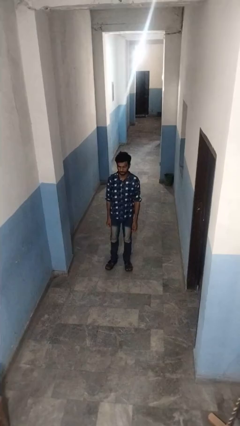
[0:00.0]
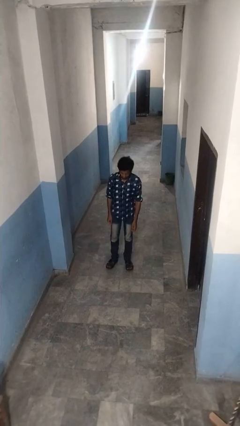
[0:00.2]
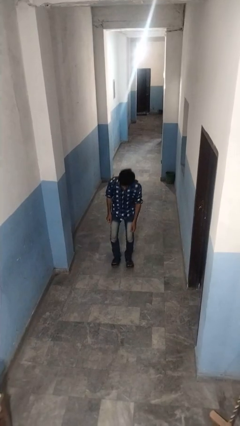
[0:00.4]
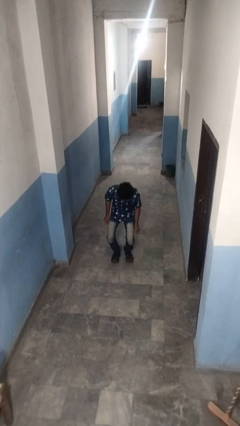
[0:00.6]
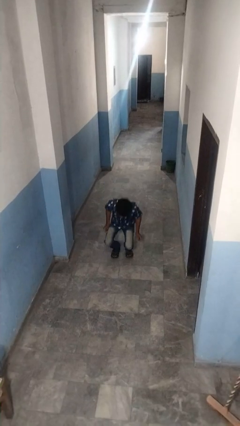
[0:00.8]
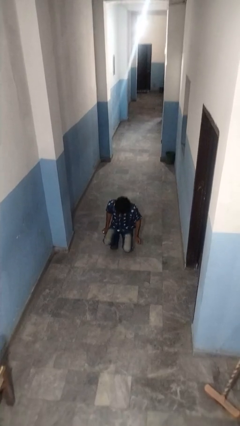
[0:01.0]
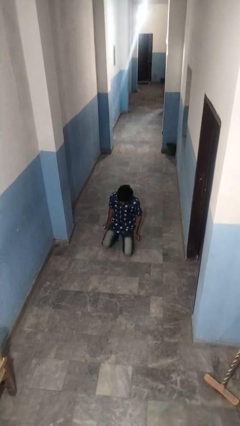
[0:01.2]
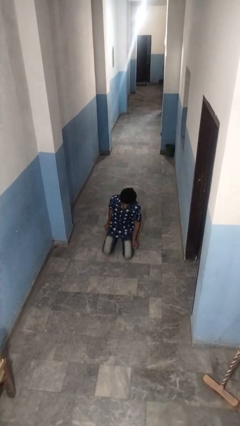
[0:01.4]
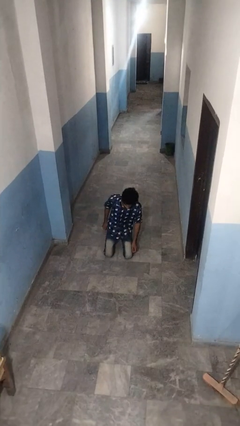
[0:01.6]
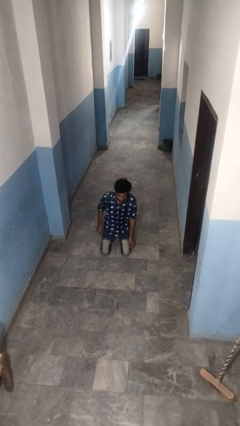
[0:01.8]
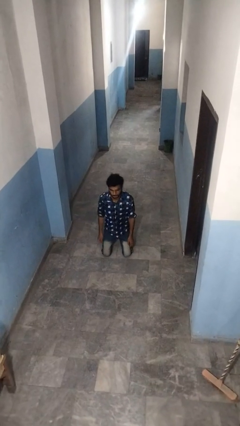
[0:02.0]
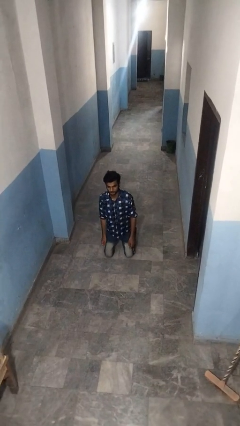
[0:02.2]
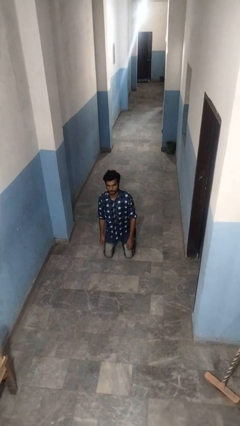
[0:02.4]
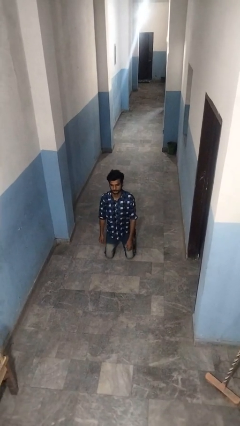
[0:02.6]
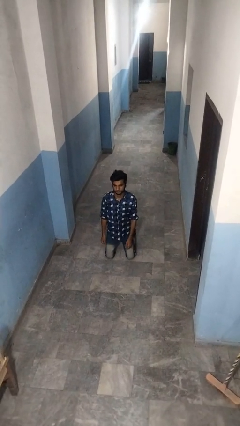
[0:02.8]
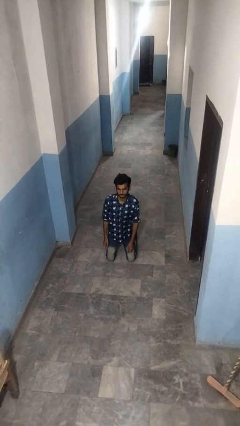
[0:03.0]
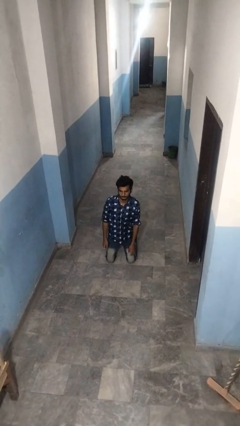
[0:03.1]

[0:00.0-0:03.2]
person kneels

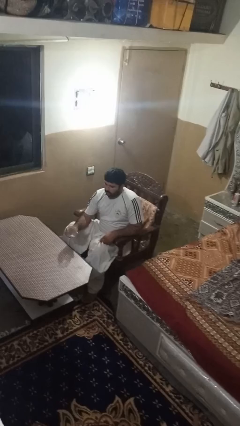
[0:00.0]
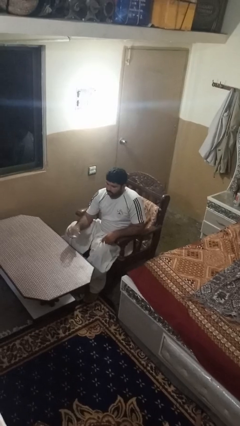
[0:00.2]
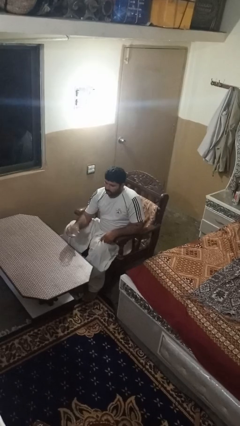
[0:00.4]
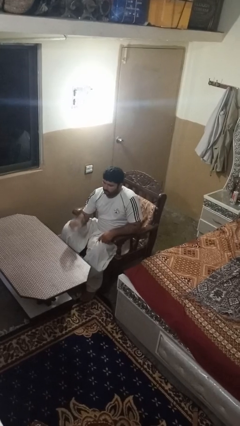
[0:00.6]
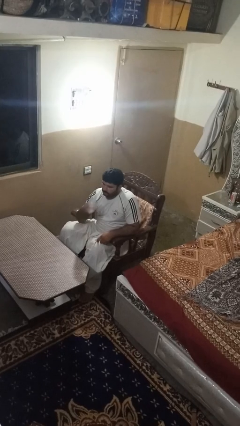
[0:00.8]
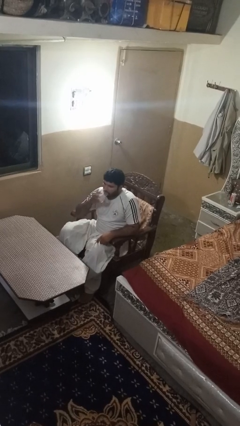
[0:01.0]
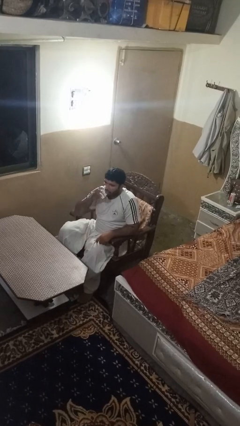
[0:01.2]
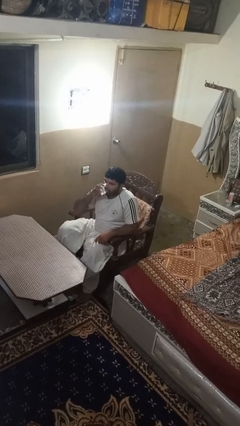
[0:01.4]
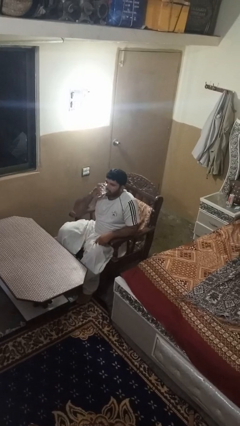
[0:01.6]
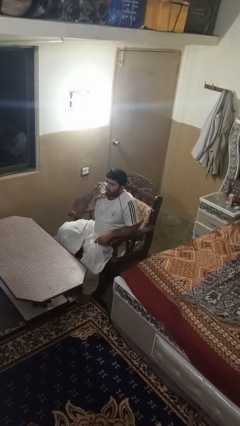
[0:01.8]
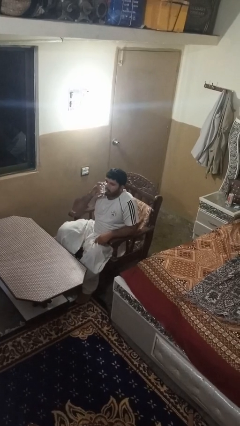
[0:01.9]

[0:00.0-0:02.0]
person drinks from shotglass

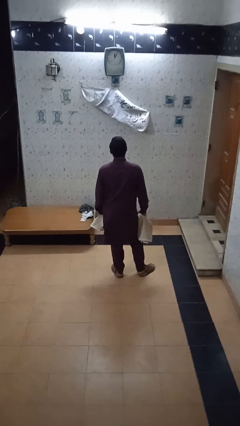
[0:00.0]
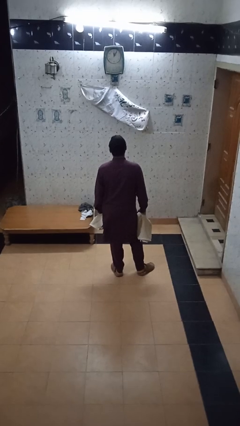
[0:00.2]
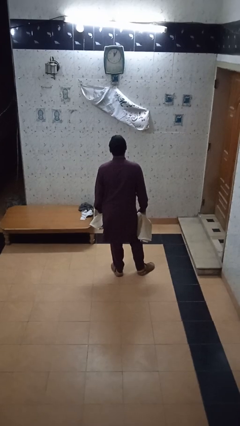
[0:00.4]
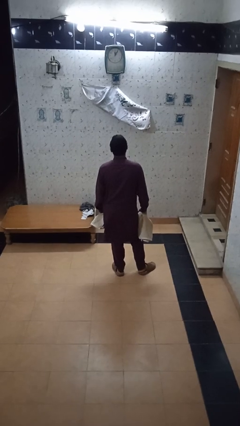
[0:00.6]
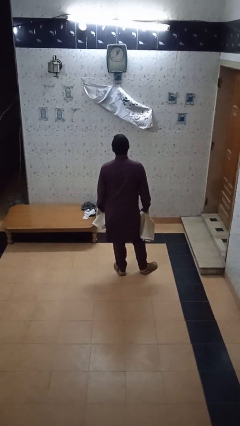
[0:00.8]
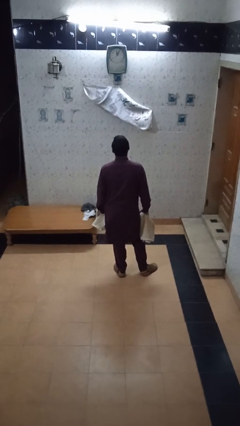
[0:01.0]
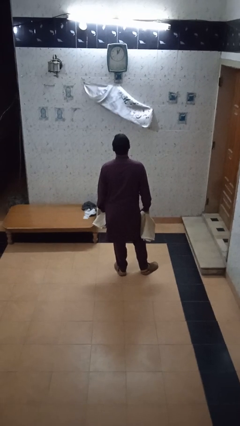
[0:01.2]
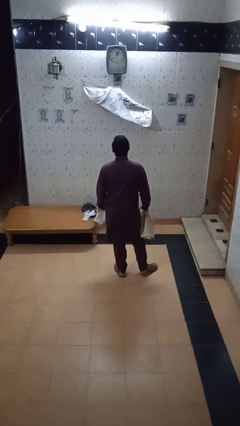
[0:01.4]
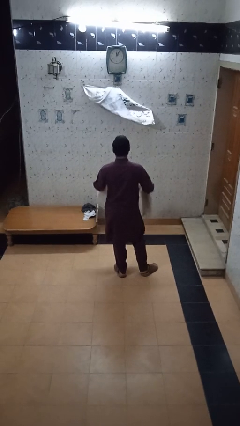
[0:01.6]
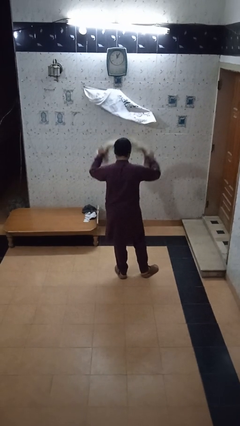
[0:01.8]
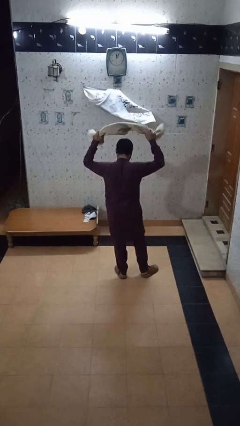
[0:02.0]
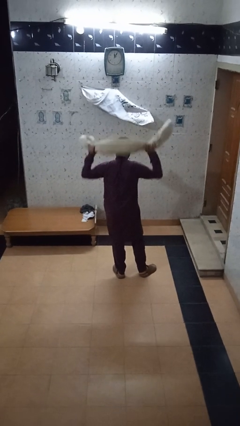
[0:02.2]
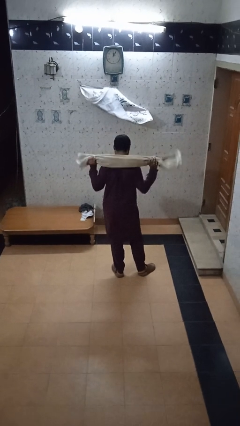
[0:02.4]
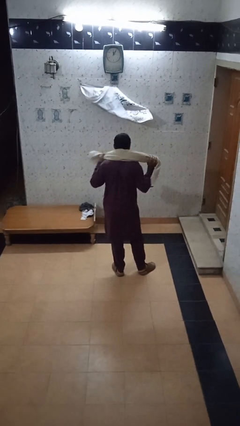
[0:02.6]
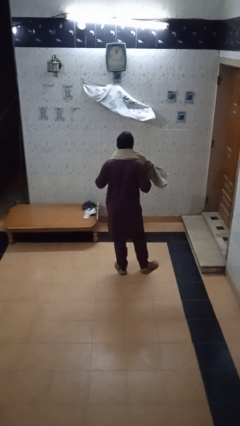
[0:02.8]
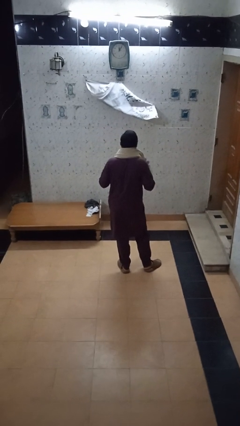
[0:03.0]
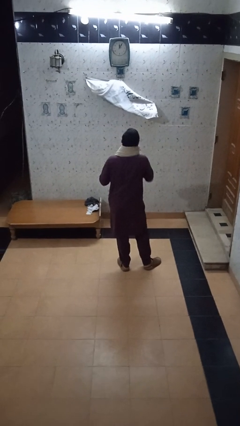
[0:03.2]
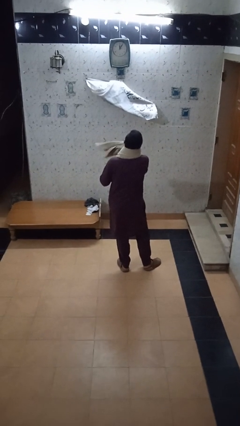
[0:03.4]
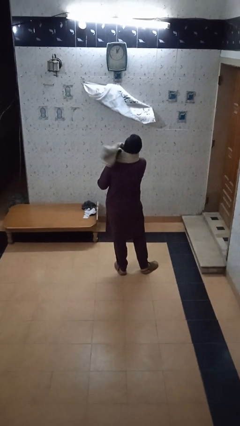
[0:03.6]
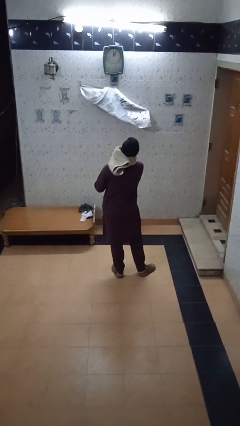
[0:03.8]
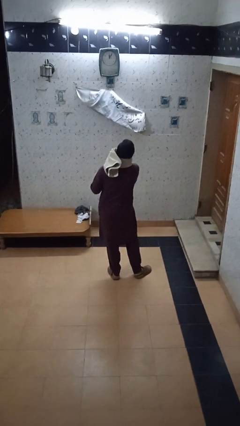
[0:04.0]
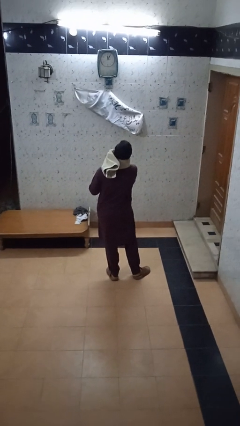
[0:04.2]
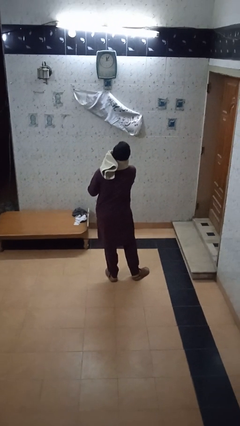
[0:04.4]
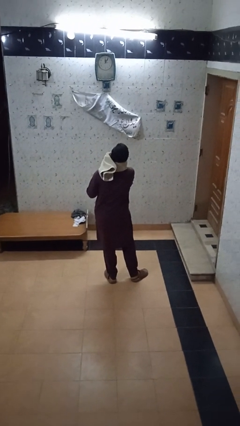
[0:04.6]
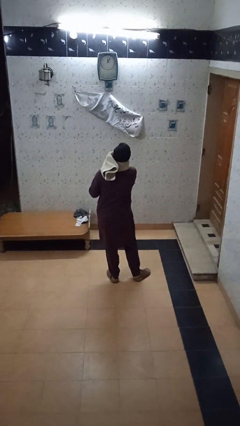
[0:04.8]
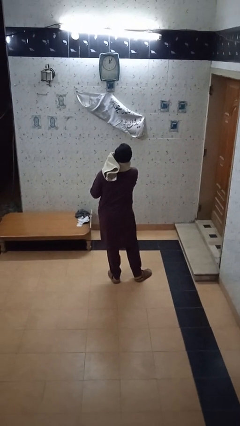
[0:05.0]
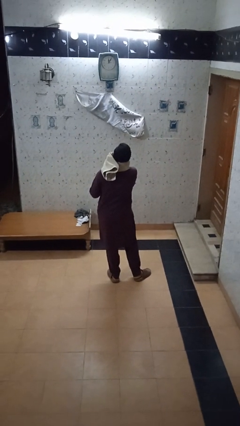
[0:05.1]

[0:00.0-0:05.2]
person puts on scarf

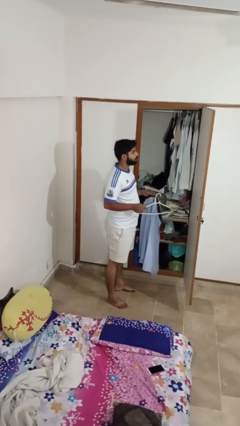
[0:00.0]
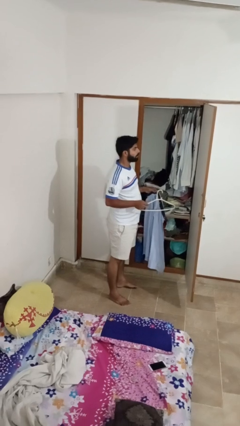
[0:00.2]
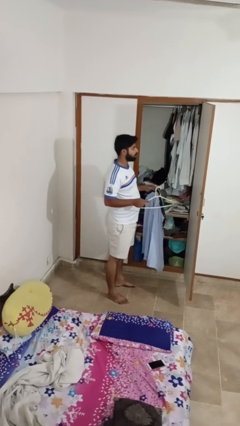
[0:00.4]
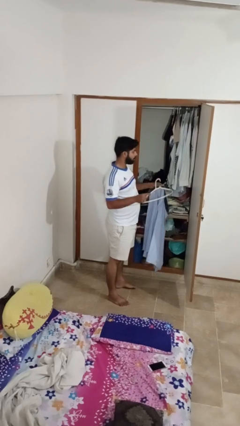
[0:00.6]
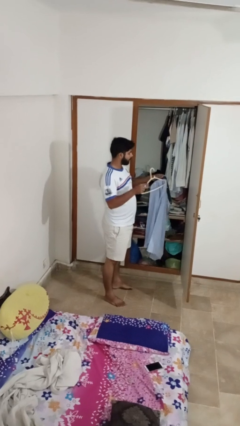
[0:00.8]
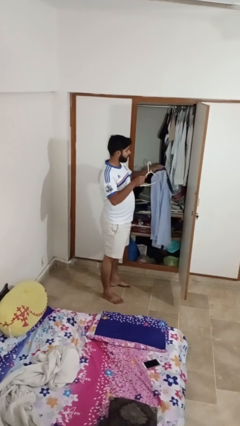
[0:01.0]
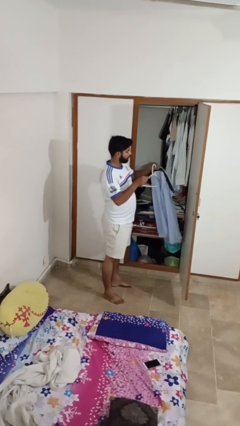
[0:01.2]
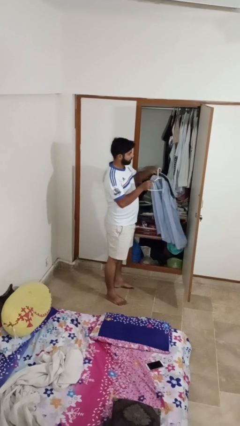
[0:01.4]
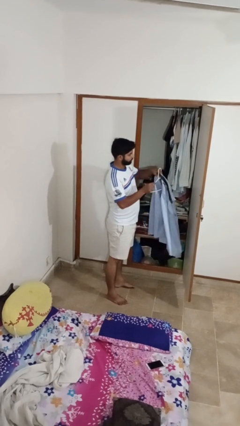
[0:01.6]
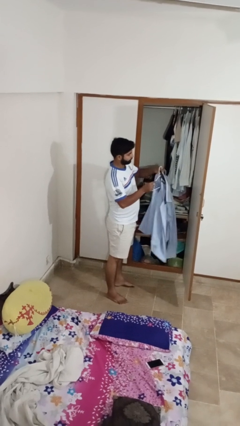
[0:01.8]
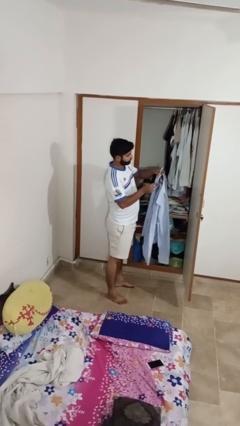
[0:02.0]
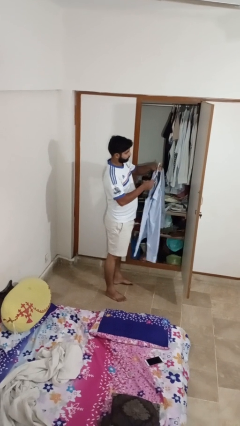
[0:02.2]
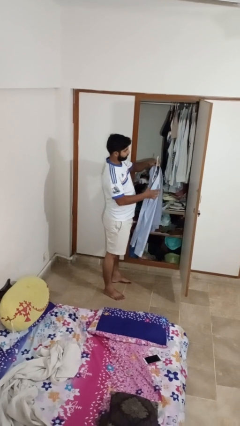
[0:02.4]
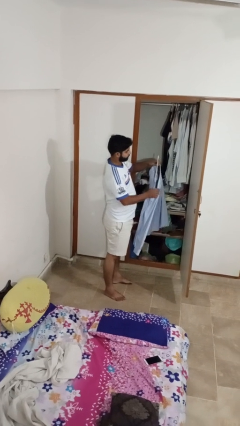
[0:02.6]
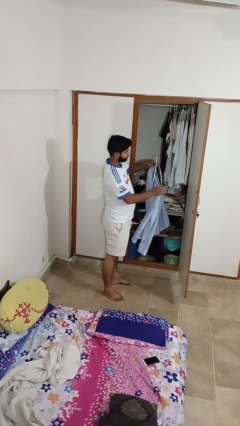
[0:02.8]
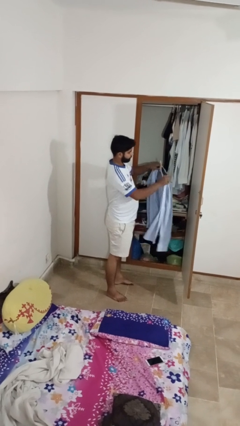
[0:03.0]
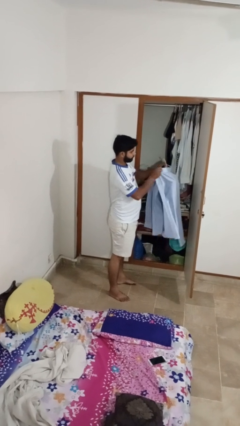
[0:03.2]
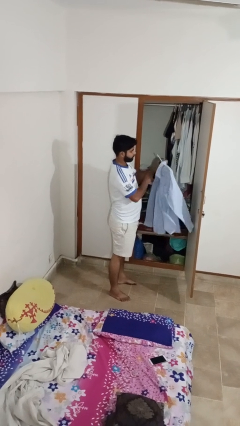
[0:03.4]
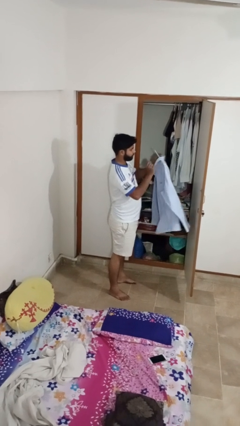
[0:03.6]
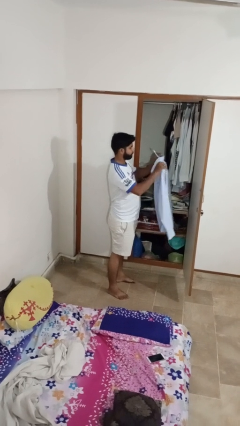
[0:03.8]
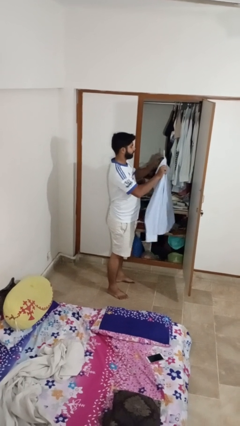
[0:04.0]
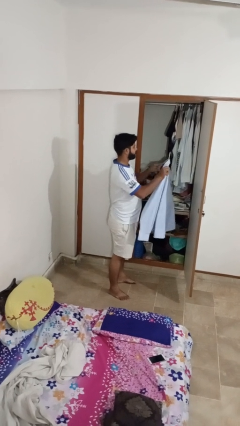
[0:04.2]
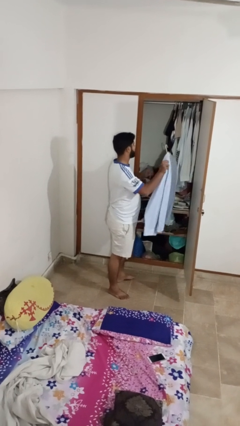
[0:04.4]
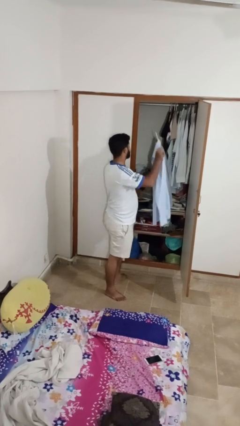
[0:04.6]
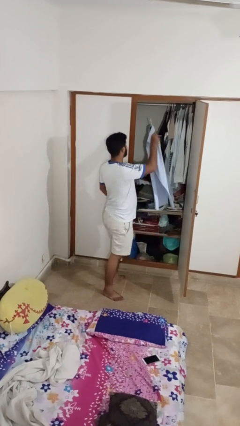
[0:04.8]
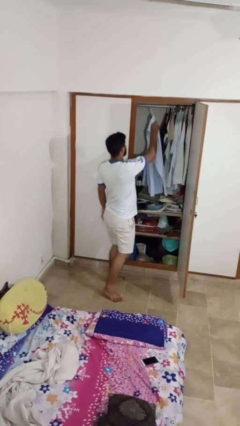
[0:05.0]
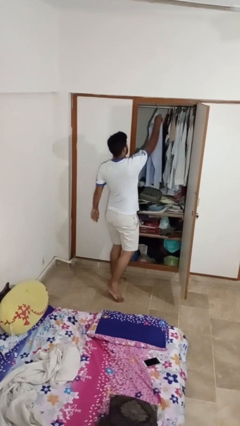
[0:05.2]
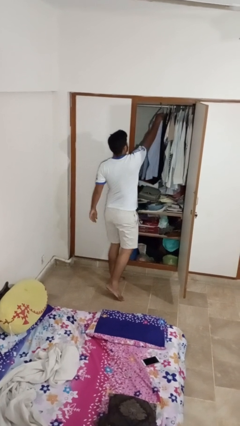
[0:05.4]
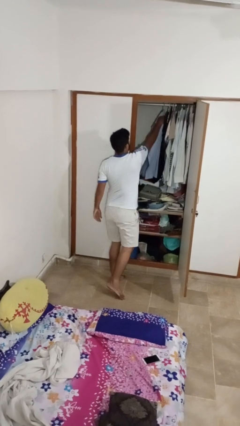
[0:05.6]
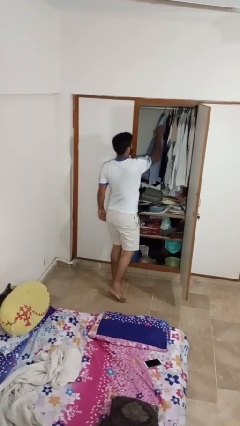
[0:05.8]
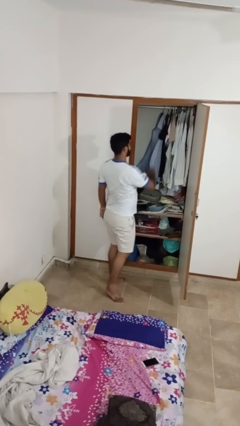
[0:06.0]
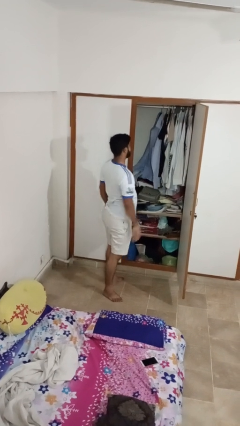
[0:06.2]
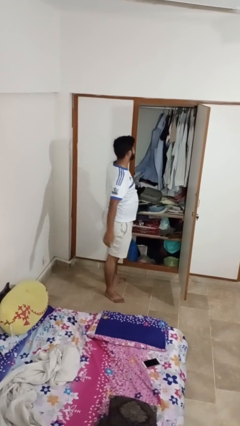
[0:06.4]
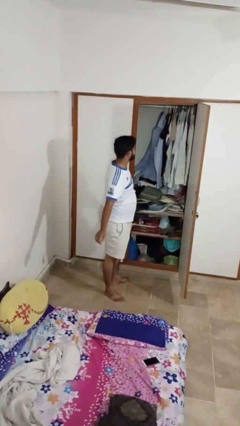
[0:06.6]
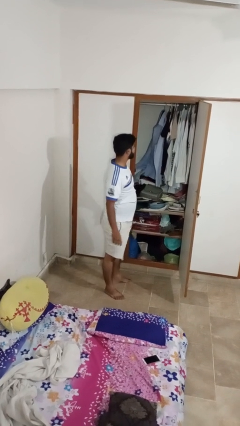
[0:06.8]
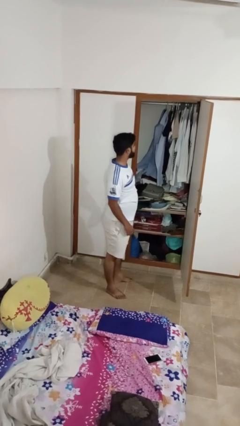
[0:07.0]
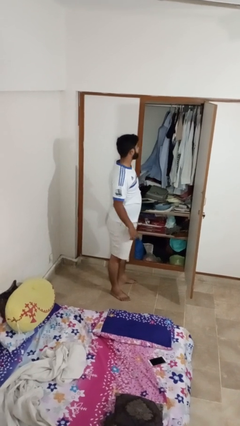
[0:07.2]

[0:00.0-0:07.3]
person puts clothes into closet

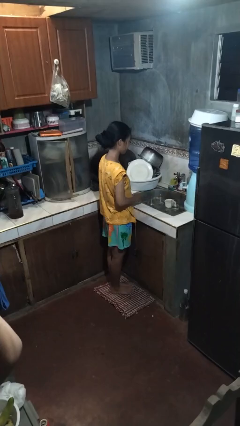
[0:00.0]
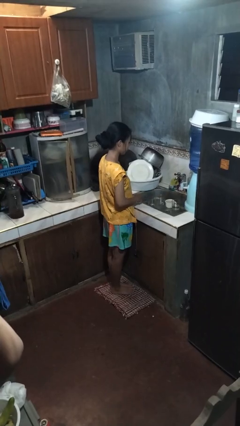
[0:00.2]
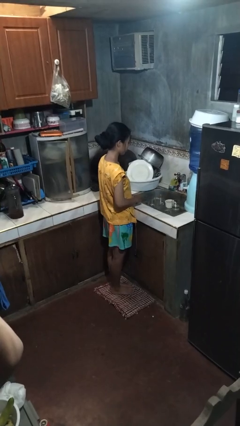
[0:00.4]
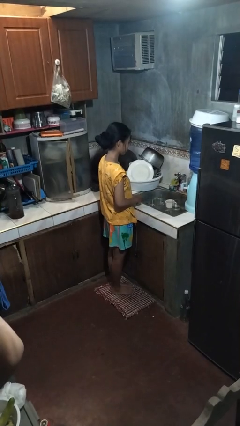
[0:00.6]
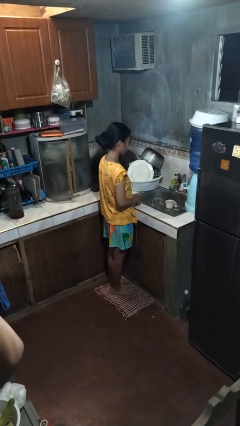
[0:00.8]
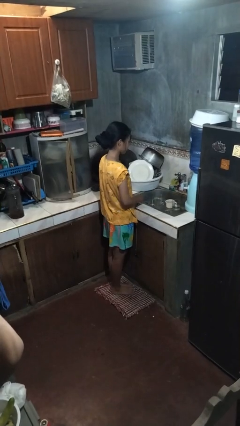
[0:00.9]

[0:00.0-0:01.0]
person turns on faucet
